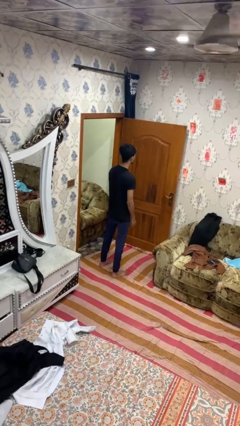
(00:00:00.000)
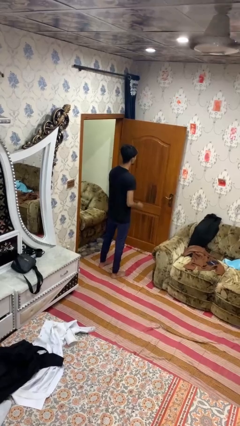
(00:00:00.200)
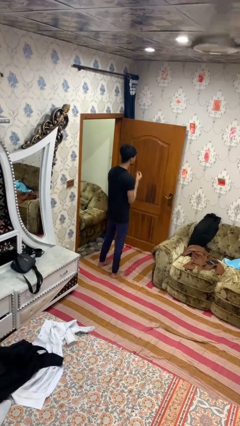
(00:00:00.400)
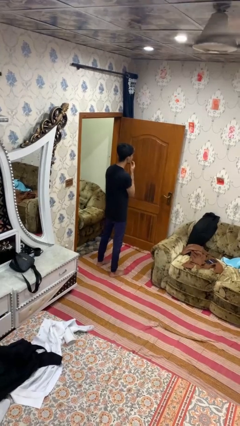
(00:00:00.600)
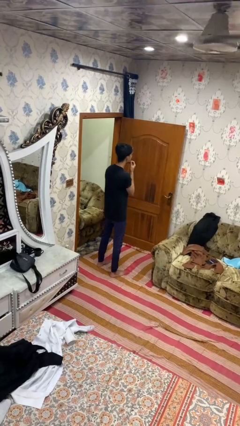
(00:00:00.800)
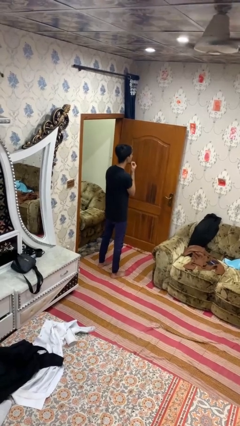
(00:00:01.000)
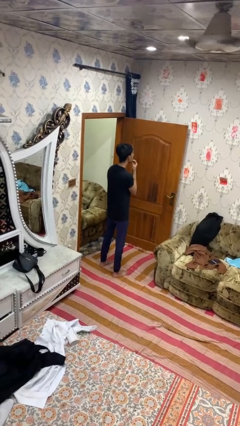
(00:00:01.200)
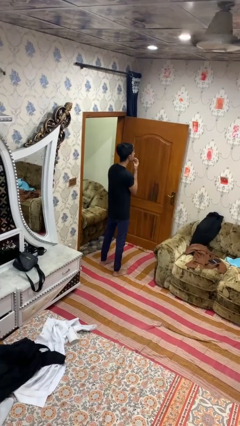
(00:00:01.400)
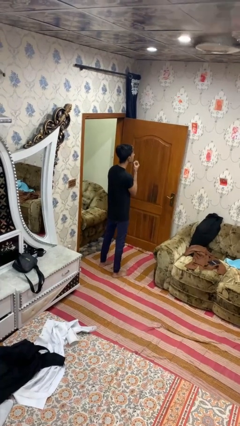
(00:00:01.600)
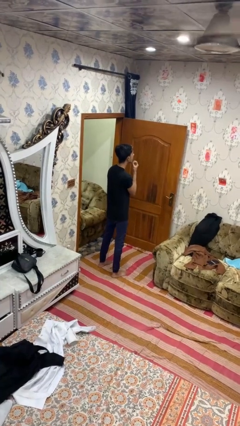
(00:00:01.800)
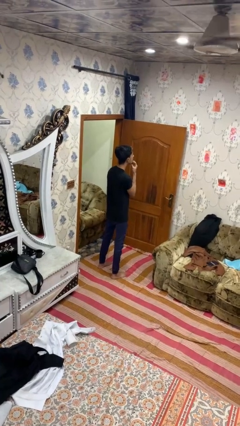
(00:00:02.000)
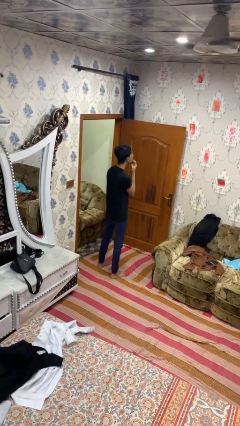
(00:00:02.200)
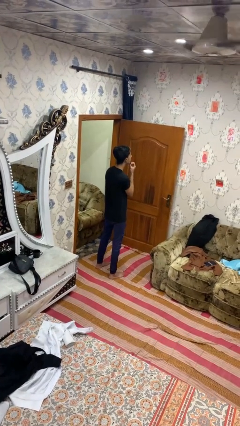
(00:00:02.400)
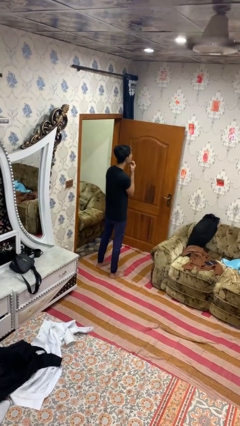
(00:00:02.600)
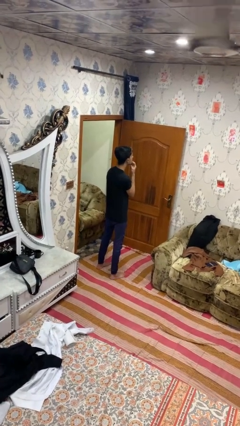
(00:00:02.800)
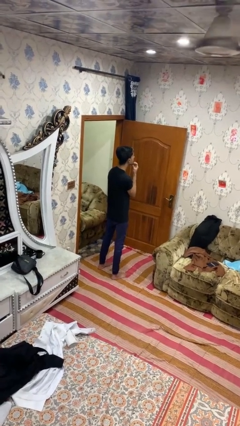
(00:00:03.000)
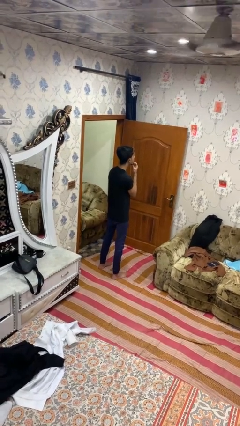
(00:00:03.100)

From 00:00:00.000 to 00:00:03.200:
person strokes chin

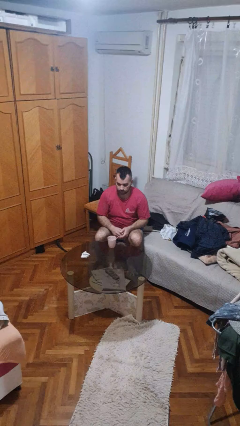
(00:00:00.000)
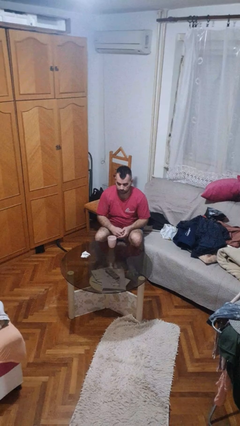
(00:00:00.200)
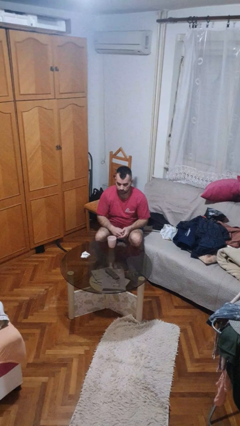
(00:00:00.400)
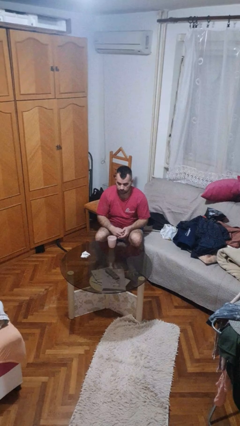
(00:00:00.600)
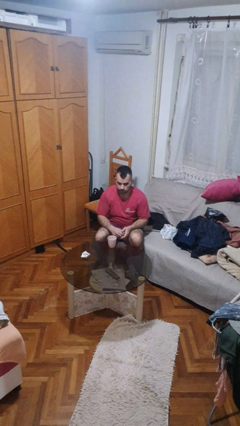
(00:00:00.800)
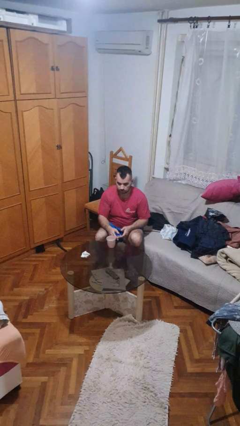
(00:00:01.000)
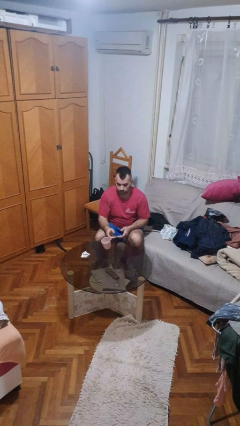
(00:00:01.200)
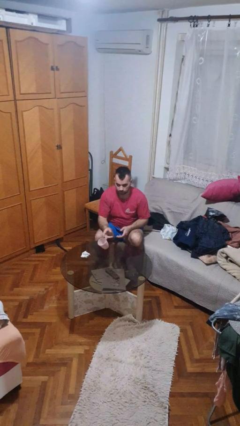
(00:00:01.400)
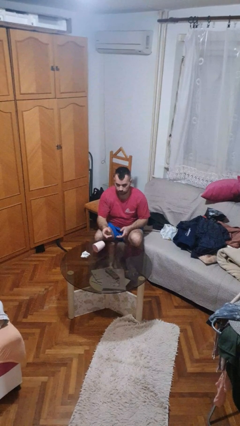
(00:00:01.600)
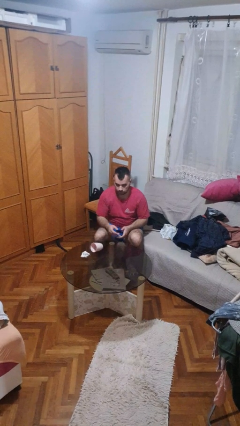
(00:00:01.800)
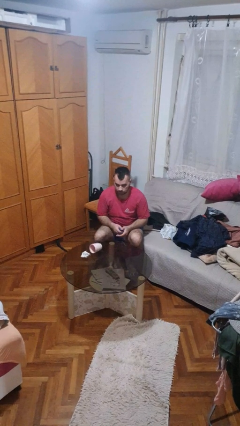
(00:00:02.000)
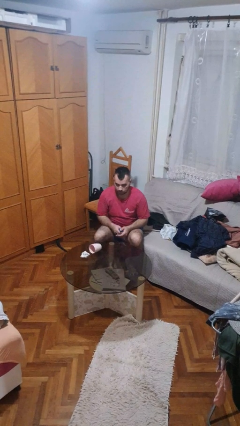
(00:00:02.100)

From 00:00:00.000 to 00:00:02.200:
person knocks over glass

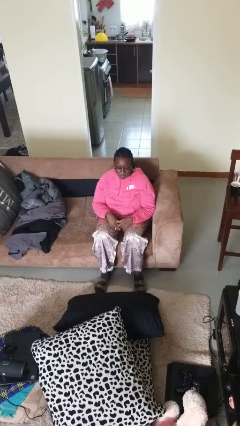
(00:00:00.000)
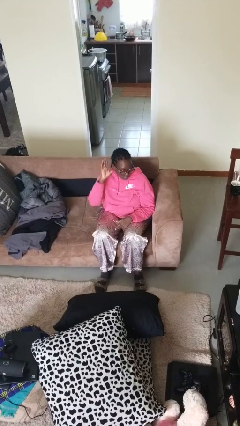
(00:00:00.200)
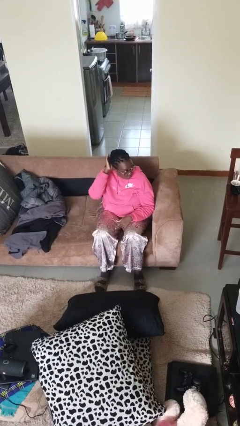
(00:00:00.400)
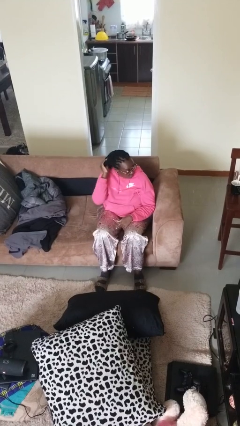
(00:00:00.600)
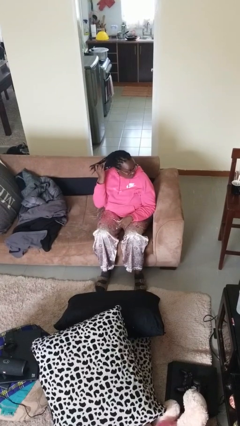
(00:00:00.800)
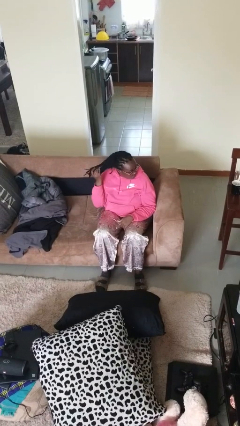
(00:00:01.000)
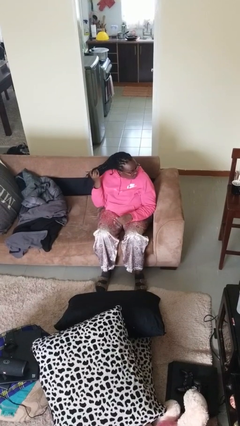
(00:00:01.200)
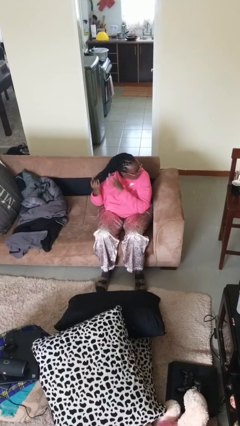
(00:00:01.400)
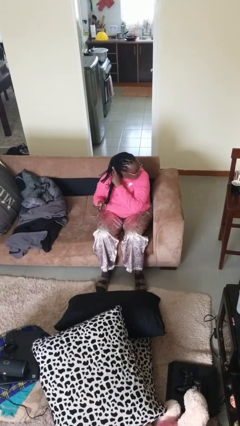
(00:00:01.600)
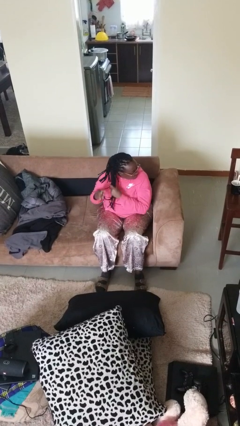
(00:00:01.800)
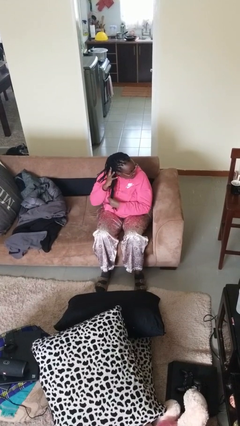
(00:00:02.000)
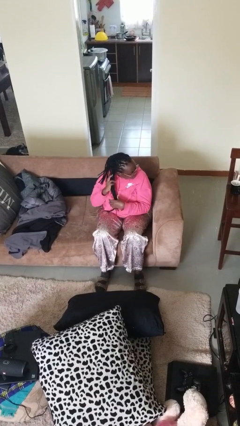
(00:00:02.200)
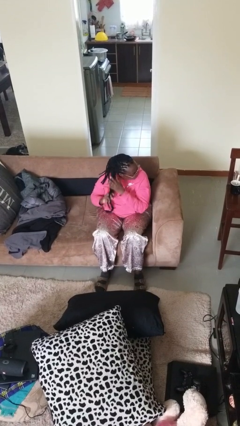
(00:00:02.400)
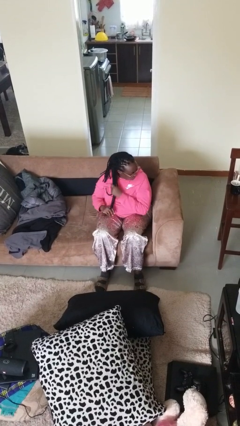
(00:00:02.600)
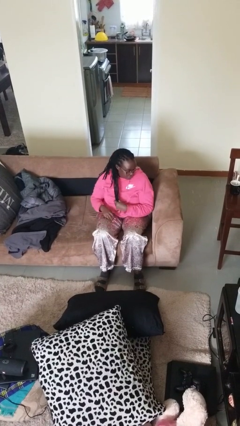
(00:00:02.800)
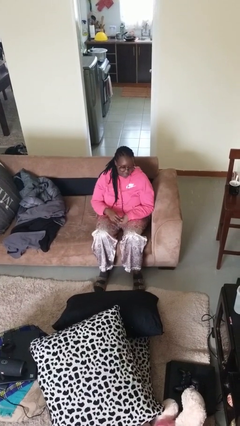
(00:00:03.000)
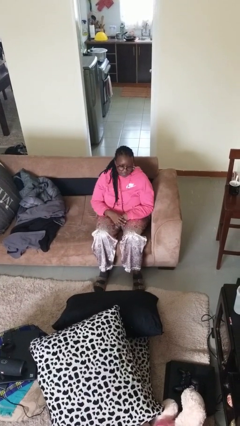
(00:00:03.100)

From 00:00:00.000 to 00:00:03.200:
person strokes hair

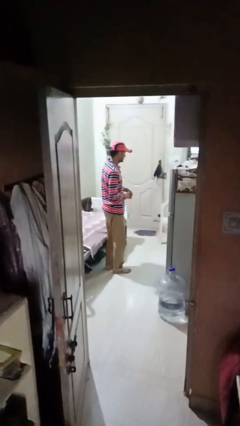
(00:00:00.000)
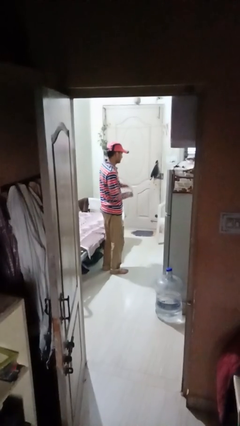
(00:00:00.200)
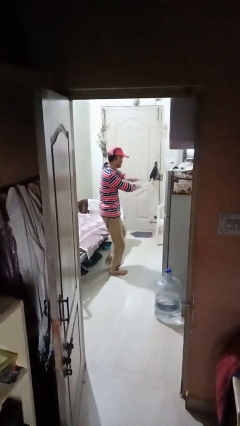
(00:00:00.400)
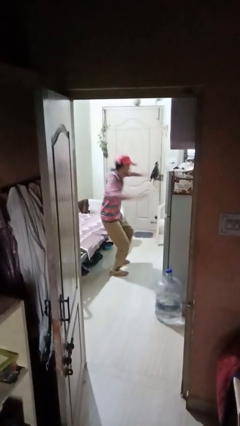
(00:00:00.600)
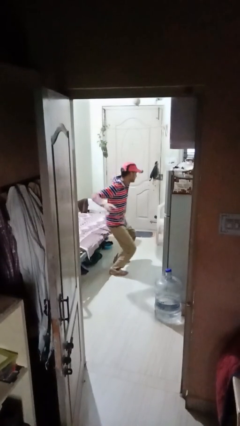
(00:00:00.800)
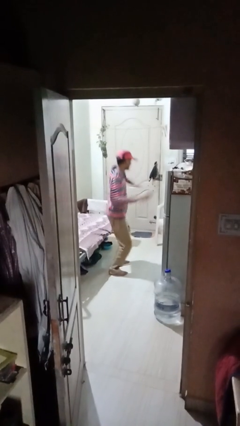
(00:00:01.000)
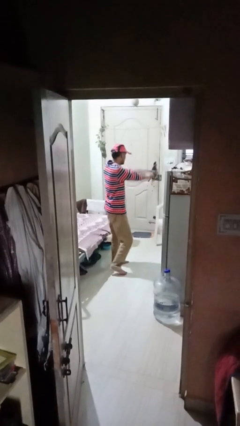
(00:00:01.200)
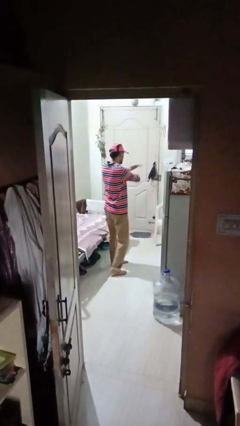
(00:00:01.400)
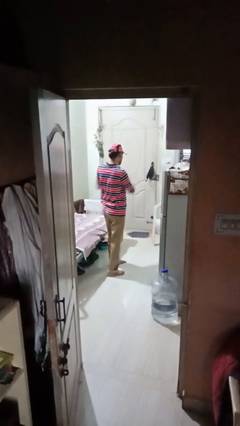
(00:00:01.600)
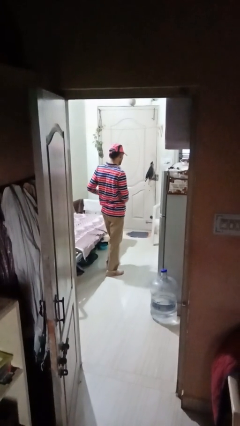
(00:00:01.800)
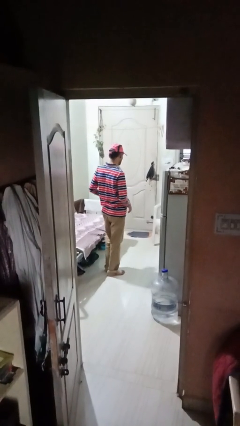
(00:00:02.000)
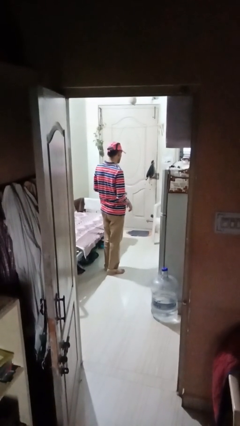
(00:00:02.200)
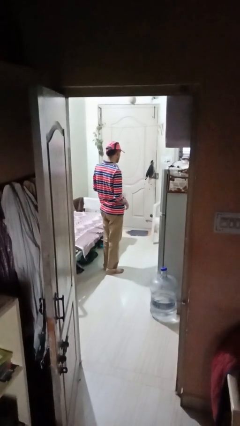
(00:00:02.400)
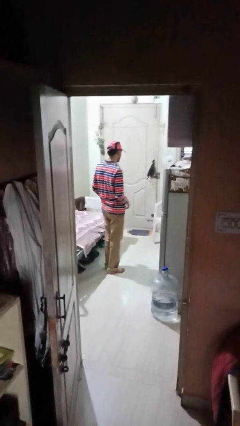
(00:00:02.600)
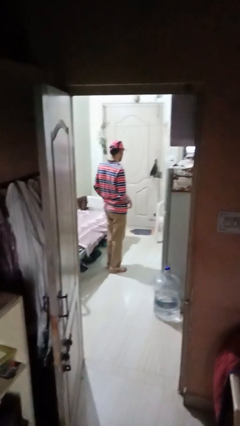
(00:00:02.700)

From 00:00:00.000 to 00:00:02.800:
person karate chop

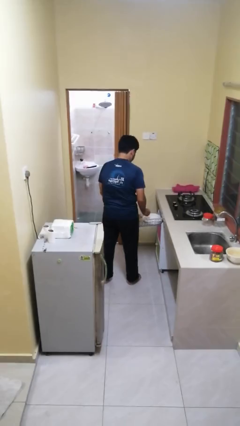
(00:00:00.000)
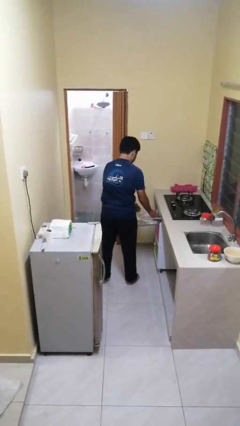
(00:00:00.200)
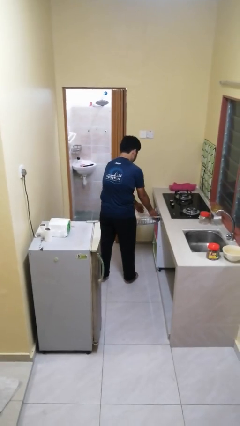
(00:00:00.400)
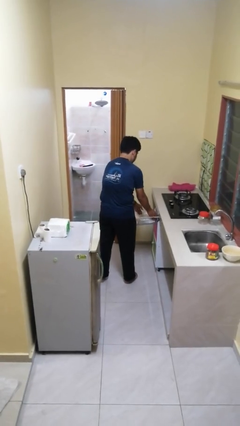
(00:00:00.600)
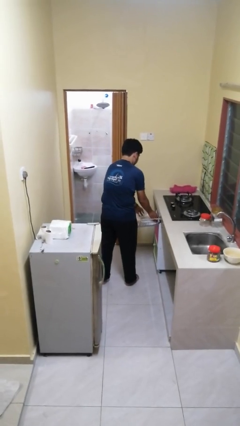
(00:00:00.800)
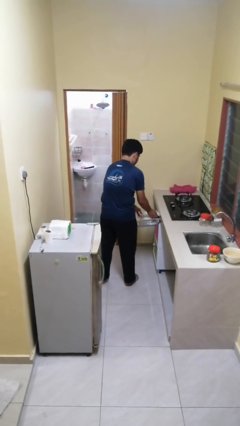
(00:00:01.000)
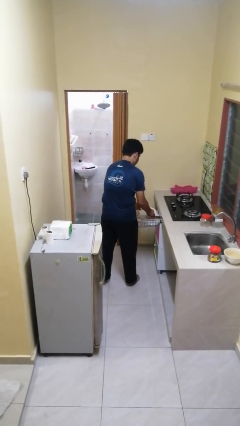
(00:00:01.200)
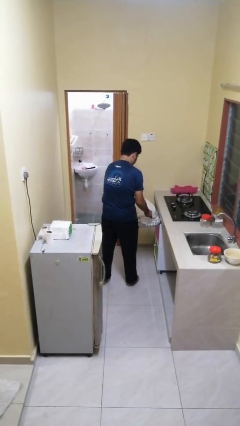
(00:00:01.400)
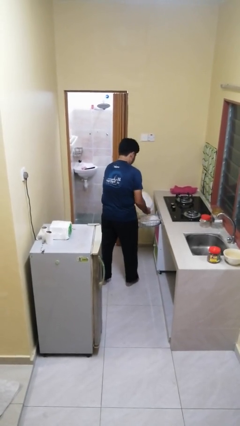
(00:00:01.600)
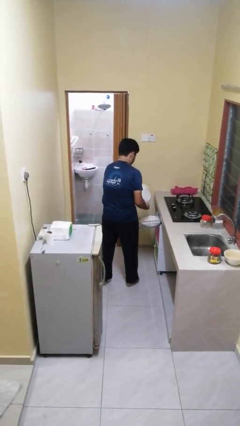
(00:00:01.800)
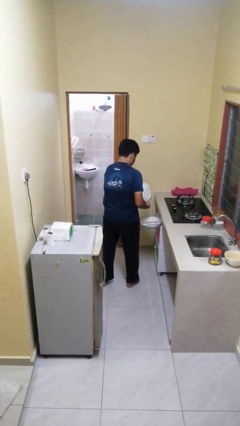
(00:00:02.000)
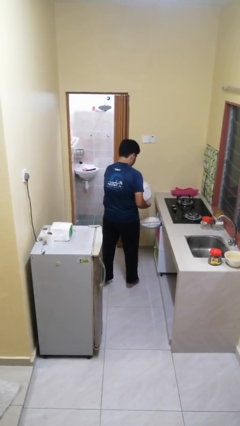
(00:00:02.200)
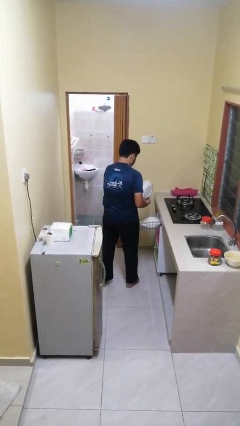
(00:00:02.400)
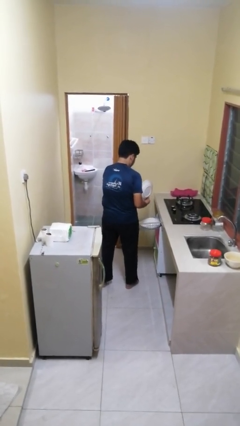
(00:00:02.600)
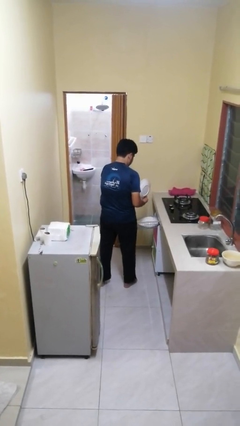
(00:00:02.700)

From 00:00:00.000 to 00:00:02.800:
person takes object from kitchen drawer

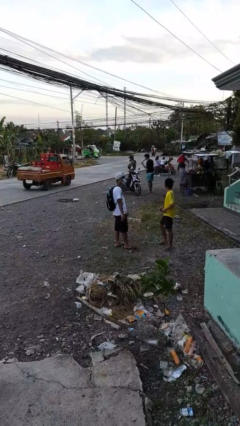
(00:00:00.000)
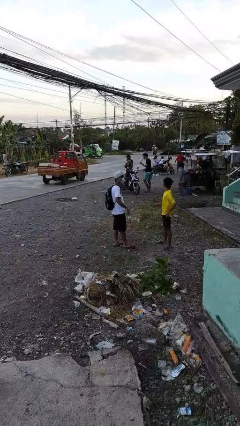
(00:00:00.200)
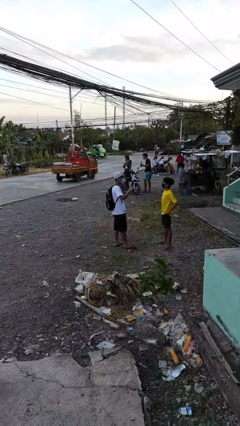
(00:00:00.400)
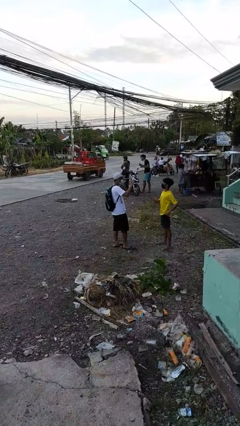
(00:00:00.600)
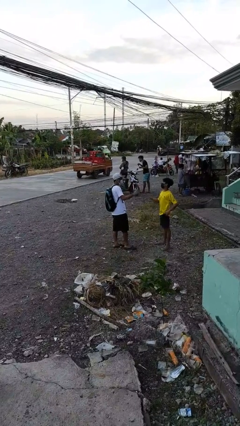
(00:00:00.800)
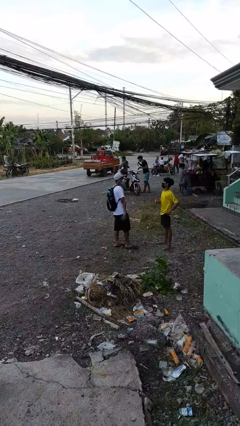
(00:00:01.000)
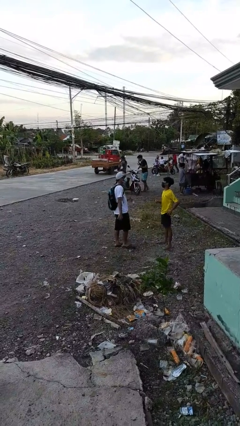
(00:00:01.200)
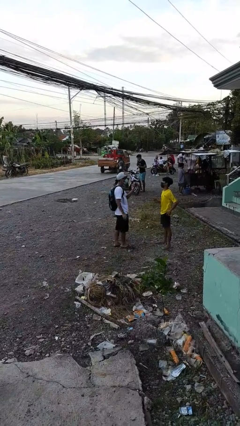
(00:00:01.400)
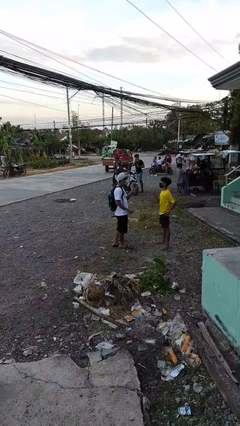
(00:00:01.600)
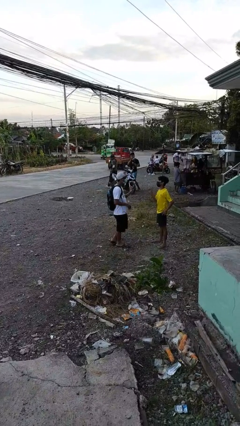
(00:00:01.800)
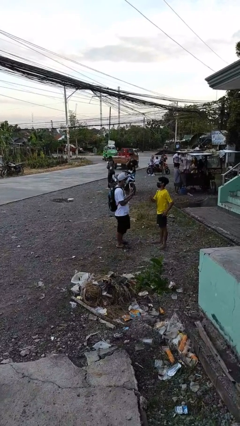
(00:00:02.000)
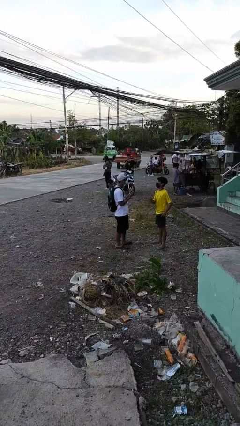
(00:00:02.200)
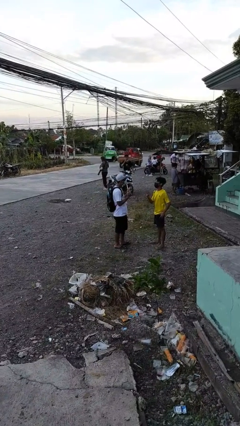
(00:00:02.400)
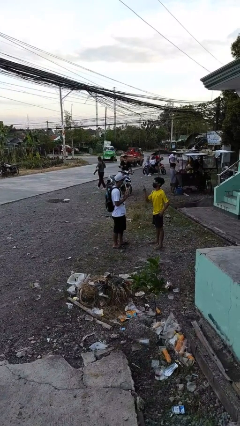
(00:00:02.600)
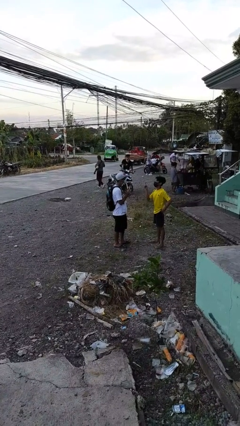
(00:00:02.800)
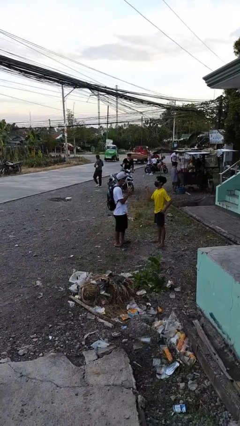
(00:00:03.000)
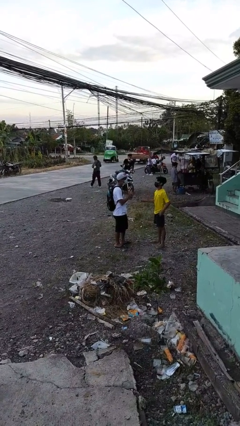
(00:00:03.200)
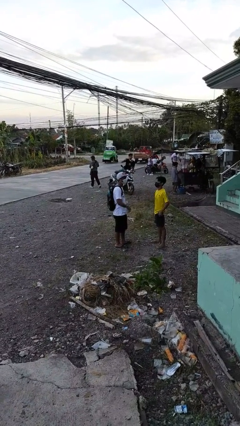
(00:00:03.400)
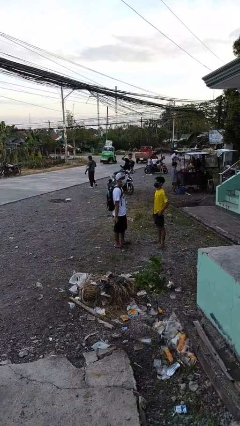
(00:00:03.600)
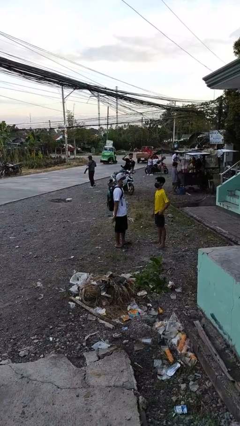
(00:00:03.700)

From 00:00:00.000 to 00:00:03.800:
person talks to person
